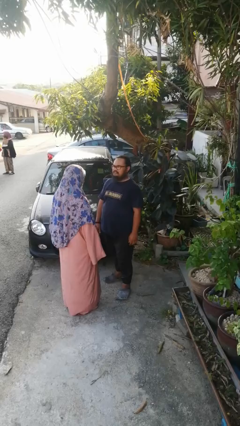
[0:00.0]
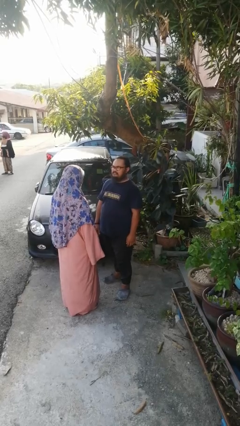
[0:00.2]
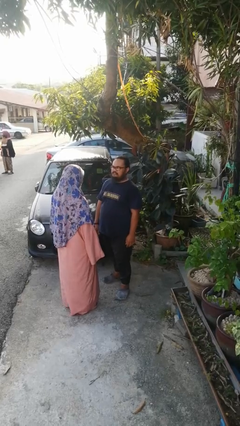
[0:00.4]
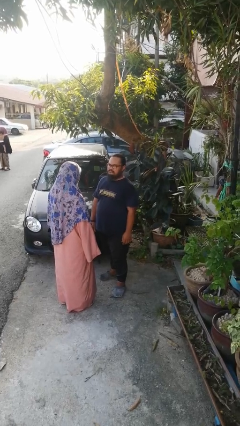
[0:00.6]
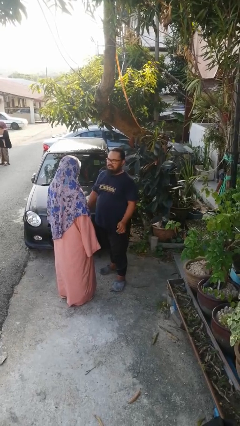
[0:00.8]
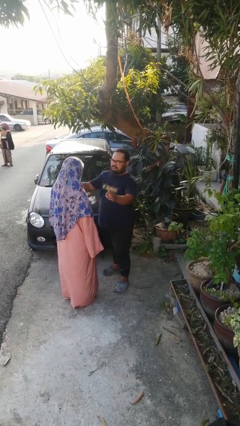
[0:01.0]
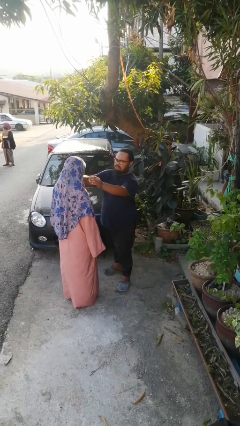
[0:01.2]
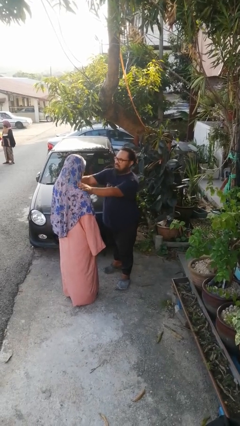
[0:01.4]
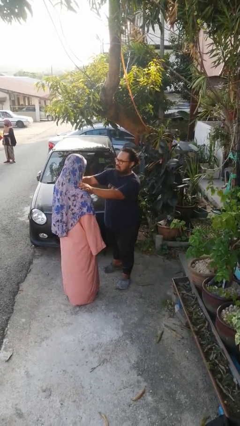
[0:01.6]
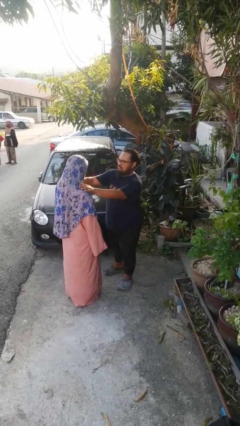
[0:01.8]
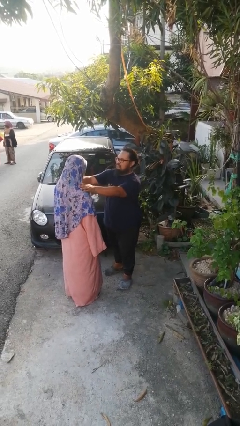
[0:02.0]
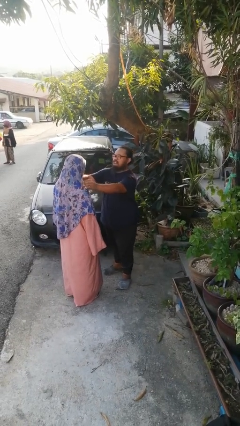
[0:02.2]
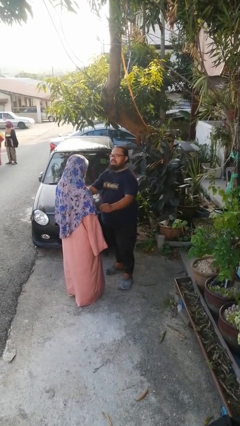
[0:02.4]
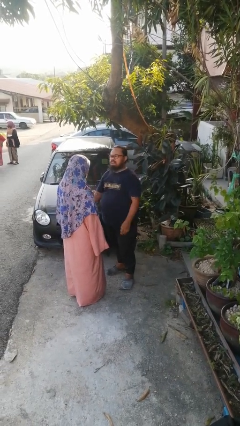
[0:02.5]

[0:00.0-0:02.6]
person pounds shoulders of person

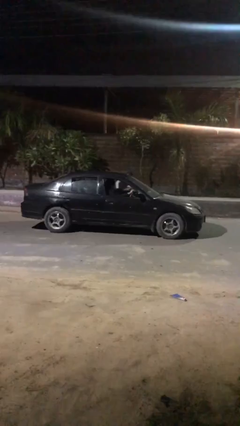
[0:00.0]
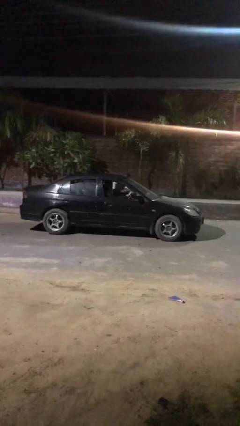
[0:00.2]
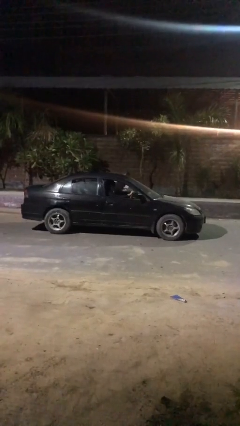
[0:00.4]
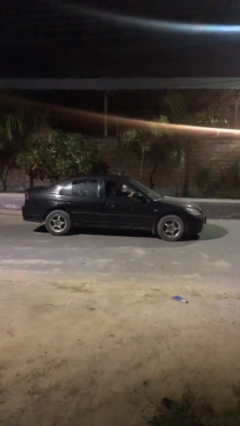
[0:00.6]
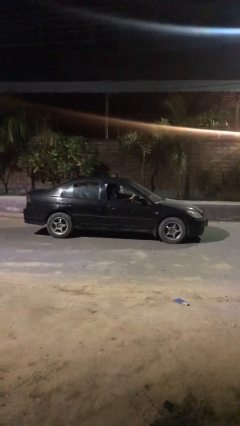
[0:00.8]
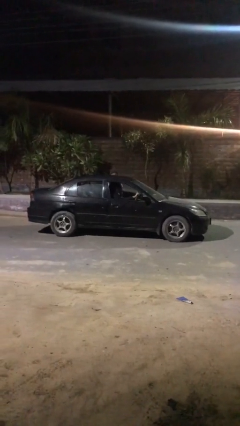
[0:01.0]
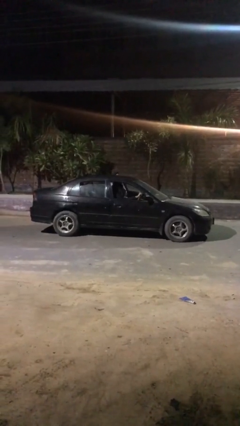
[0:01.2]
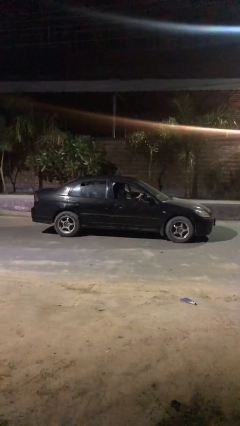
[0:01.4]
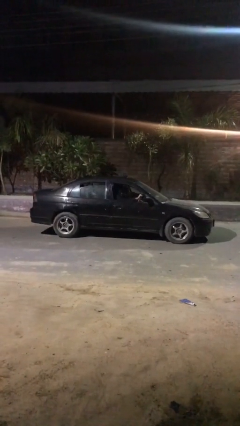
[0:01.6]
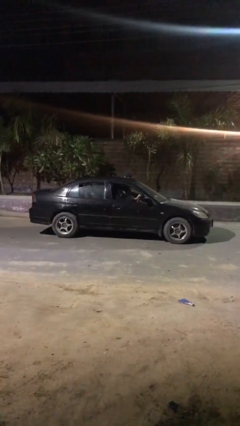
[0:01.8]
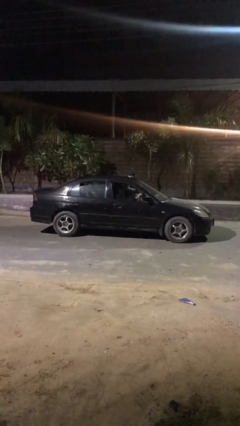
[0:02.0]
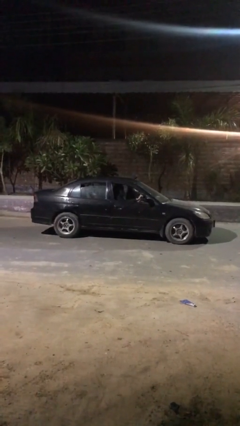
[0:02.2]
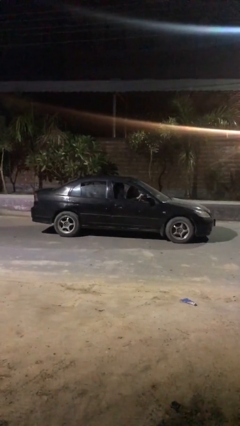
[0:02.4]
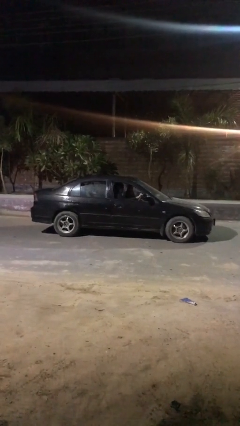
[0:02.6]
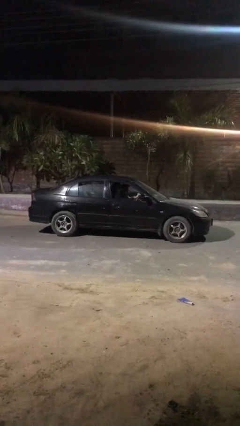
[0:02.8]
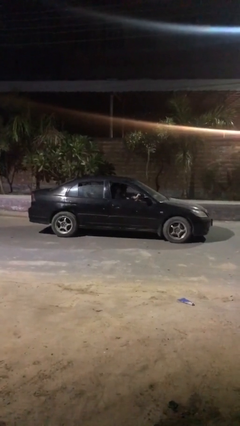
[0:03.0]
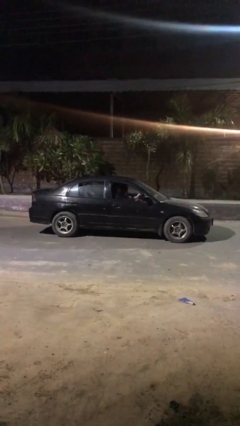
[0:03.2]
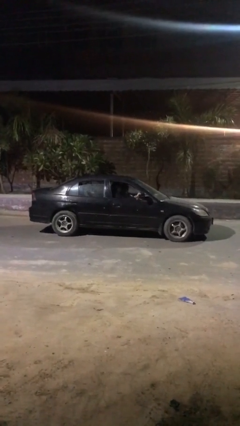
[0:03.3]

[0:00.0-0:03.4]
car picks up person

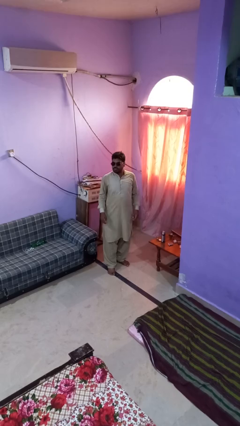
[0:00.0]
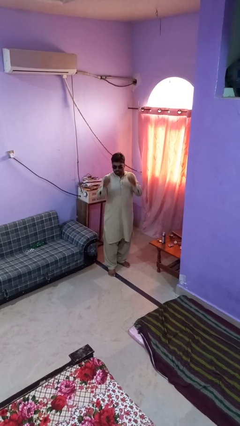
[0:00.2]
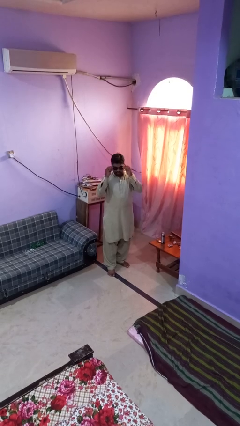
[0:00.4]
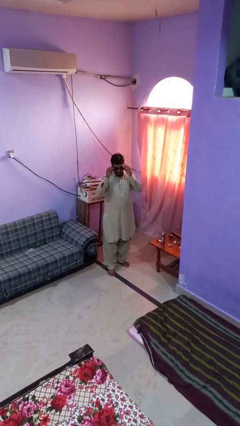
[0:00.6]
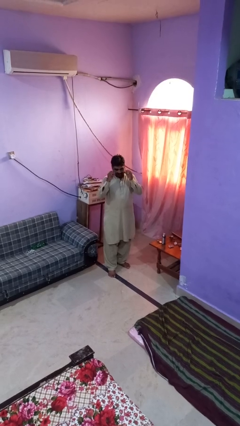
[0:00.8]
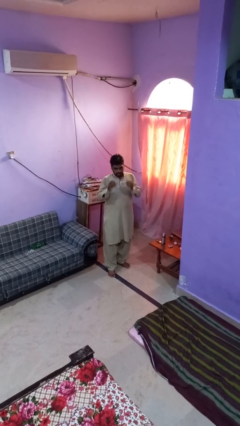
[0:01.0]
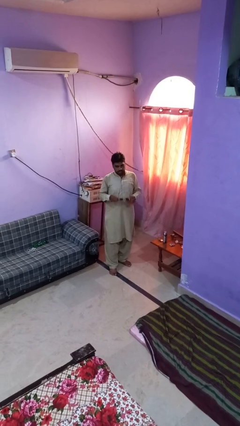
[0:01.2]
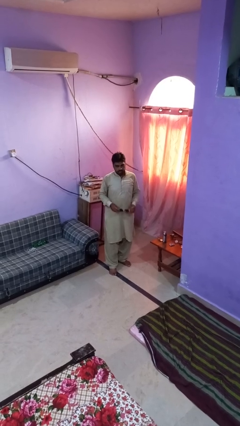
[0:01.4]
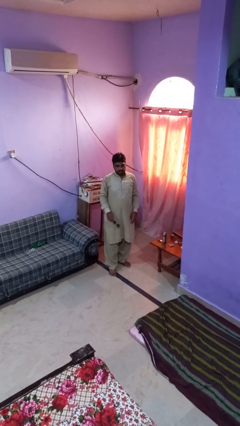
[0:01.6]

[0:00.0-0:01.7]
person takes off sunglasses

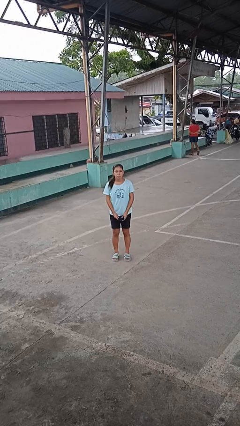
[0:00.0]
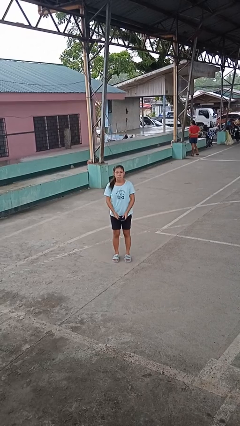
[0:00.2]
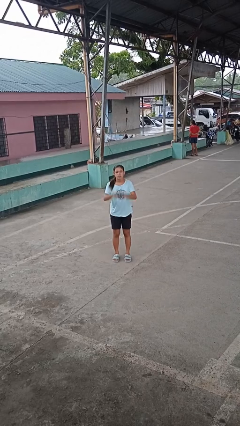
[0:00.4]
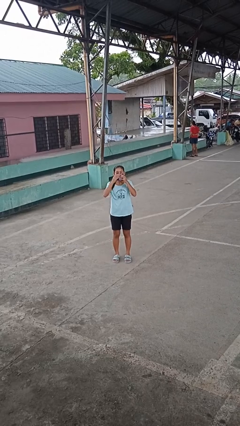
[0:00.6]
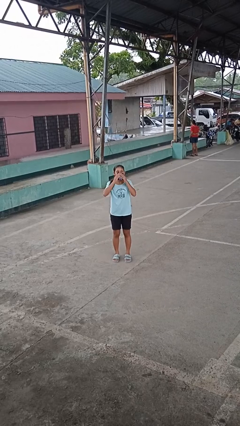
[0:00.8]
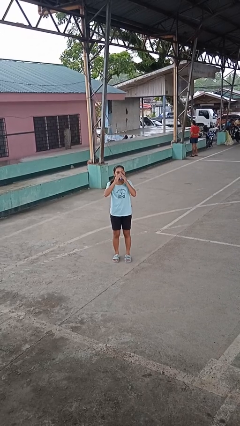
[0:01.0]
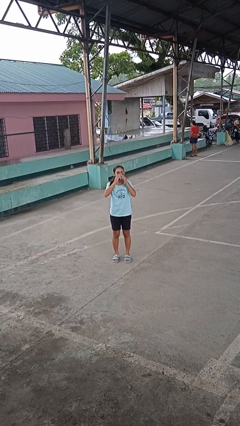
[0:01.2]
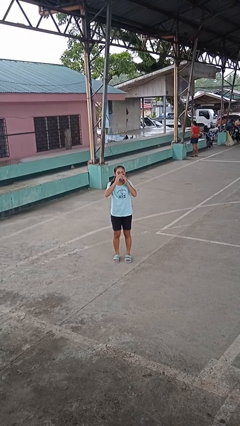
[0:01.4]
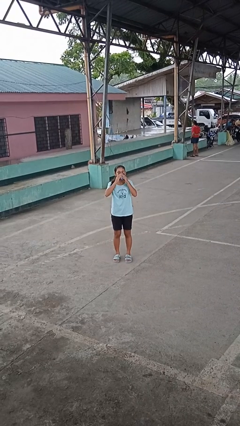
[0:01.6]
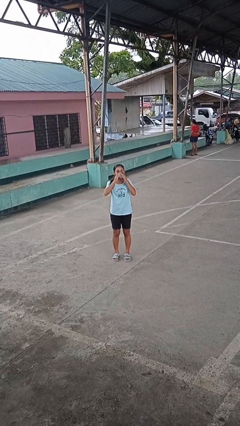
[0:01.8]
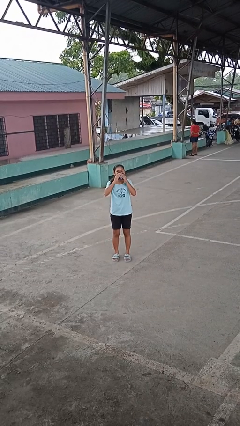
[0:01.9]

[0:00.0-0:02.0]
person blows nose

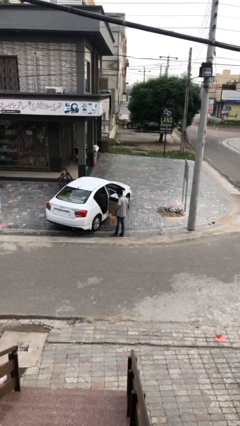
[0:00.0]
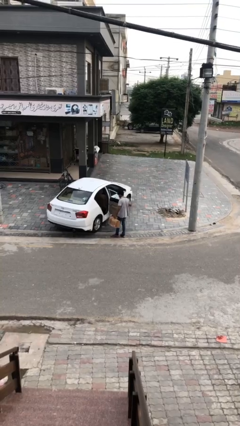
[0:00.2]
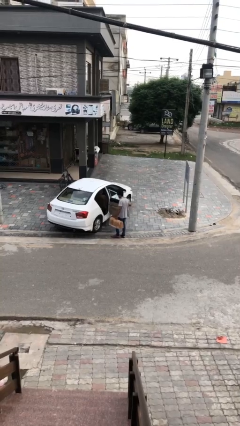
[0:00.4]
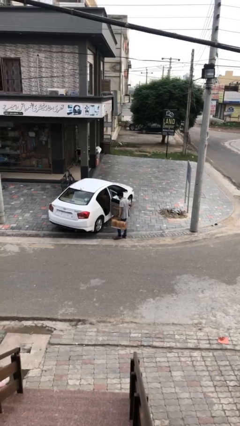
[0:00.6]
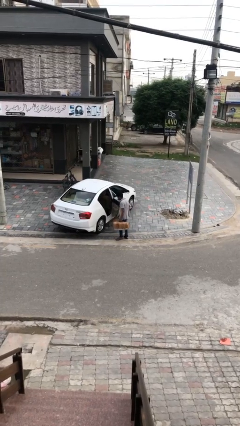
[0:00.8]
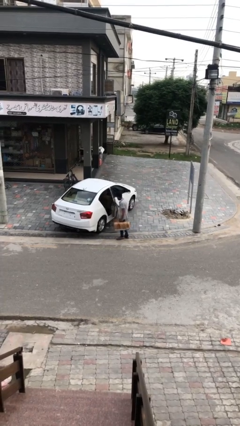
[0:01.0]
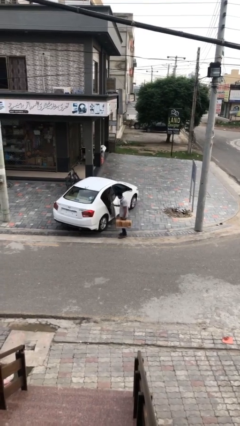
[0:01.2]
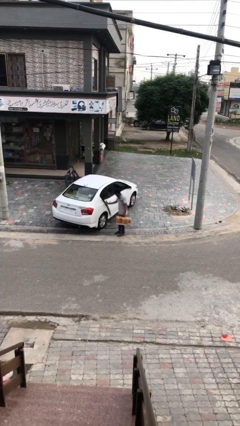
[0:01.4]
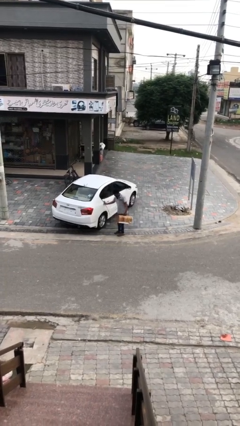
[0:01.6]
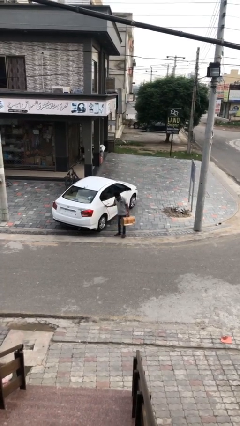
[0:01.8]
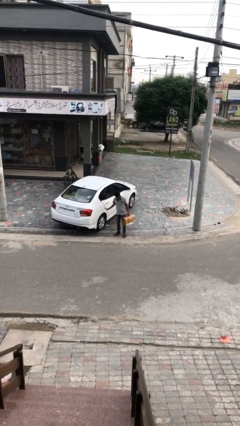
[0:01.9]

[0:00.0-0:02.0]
person closes car door

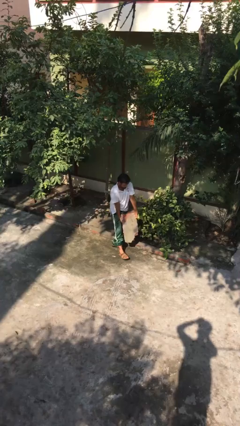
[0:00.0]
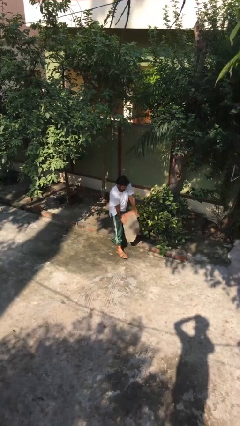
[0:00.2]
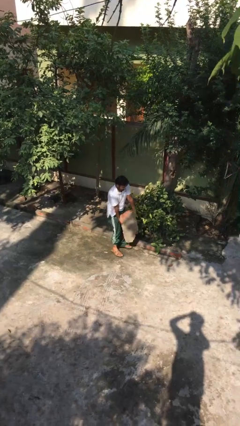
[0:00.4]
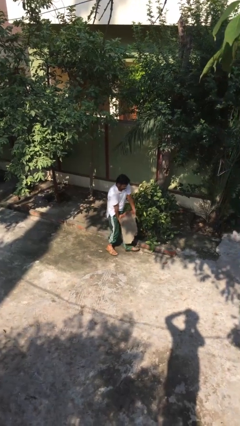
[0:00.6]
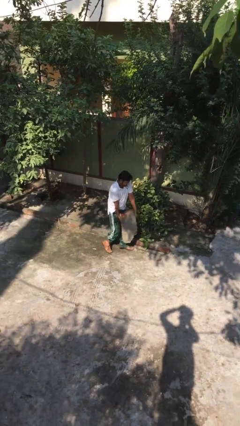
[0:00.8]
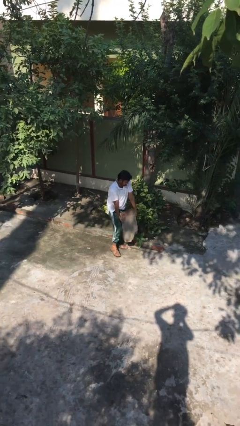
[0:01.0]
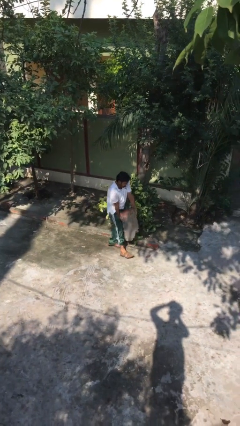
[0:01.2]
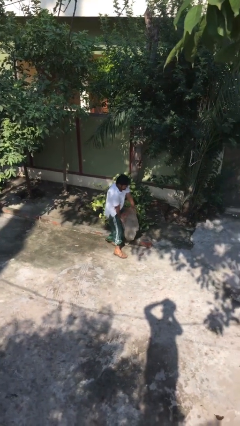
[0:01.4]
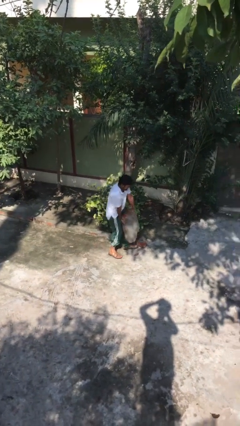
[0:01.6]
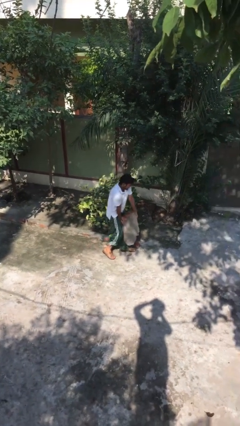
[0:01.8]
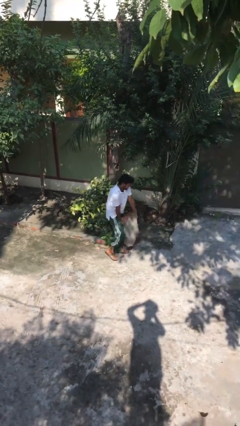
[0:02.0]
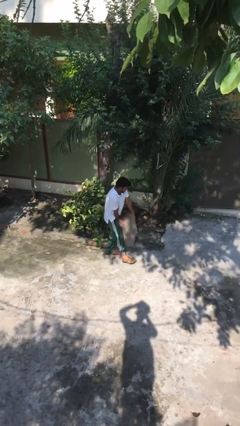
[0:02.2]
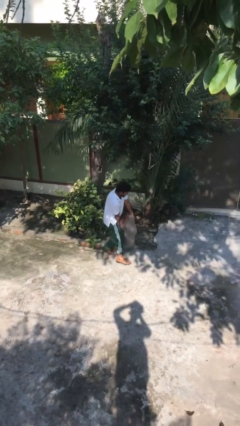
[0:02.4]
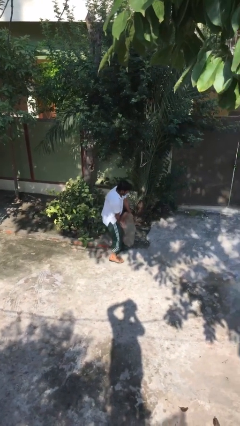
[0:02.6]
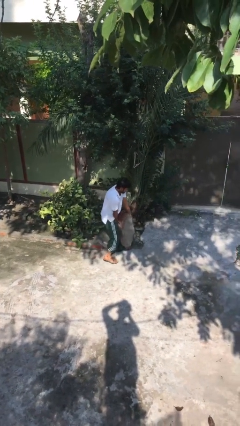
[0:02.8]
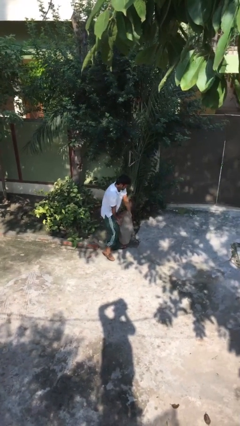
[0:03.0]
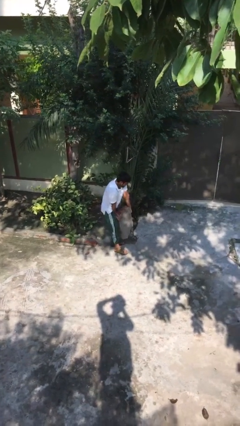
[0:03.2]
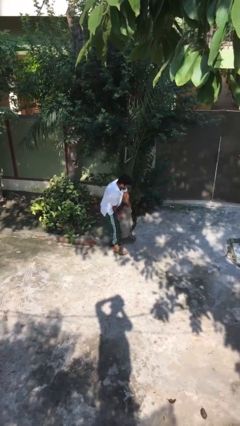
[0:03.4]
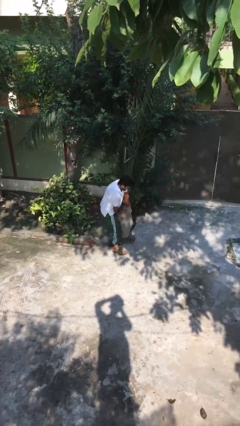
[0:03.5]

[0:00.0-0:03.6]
person carries heavy object

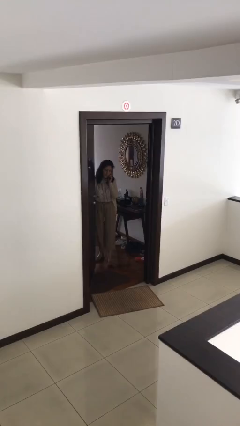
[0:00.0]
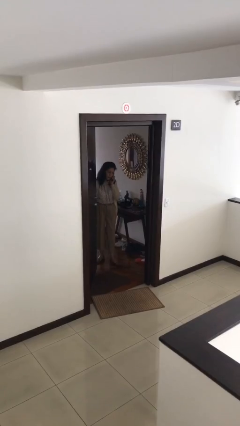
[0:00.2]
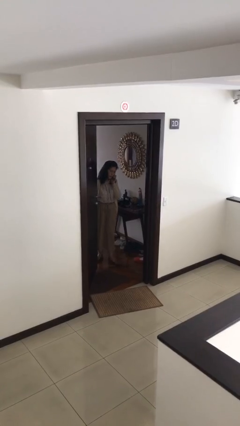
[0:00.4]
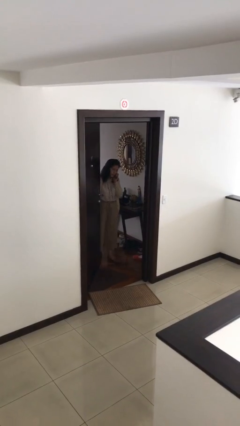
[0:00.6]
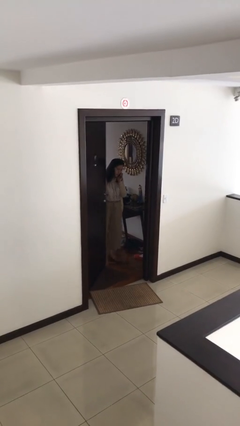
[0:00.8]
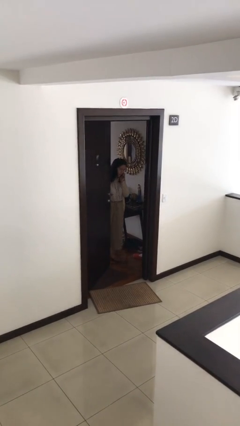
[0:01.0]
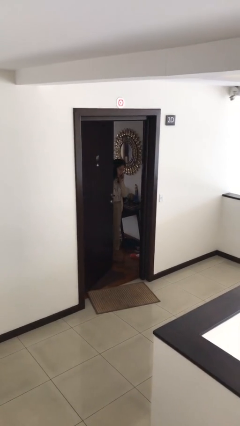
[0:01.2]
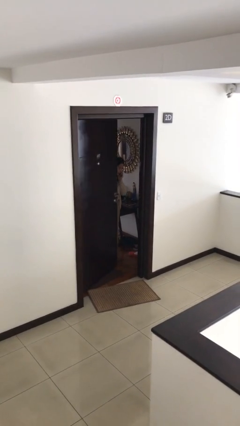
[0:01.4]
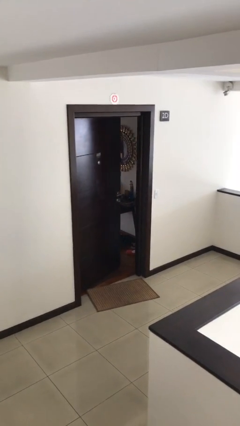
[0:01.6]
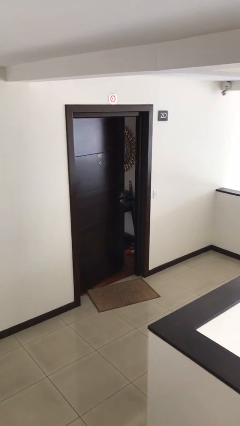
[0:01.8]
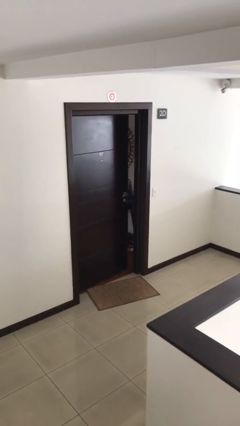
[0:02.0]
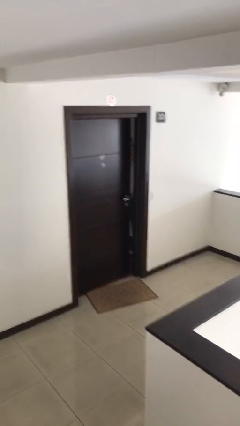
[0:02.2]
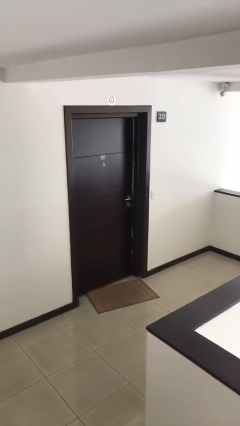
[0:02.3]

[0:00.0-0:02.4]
person closes facility door
